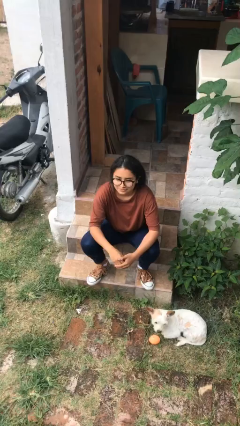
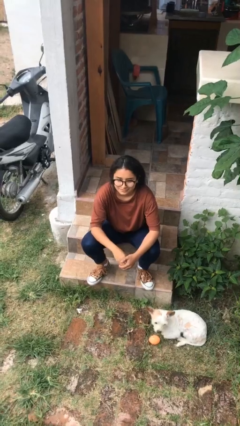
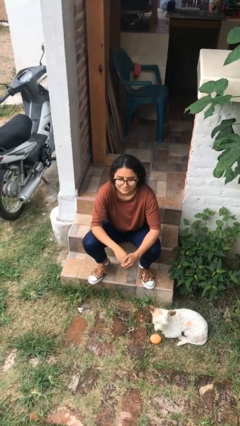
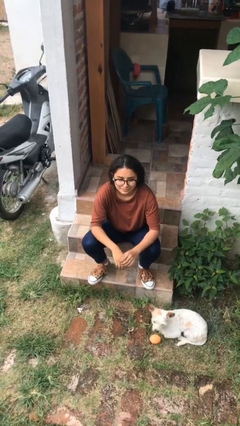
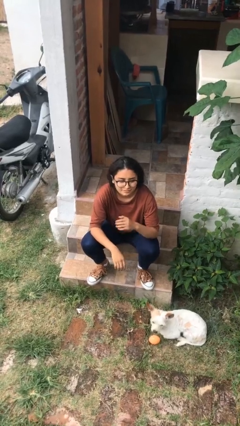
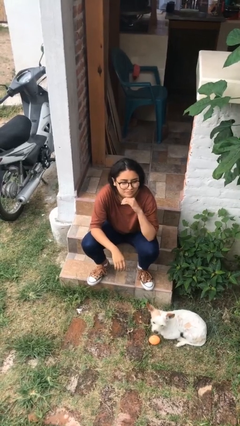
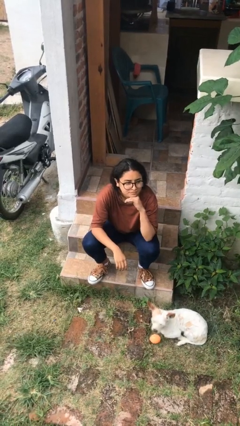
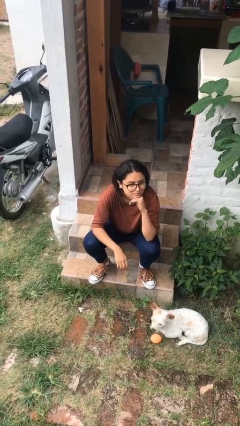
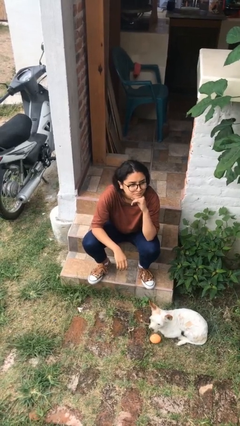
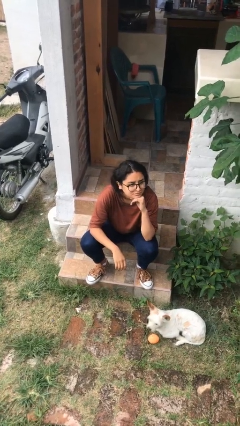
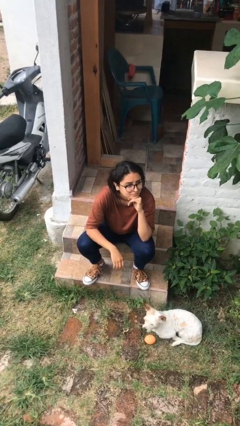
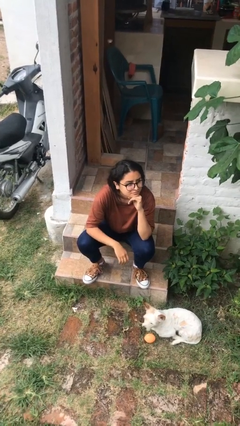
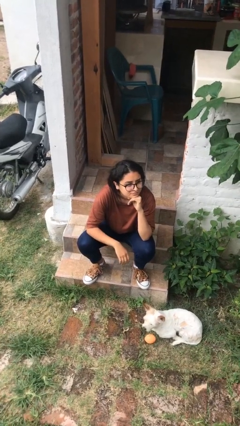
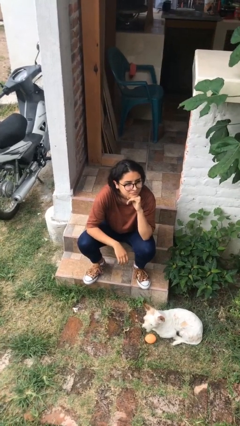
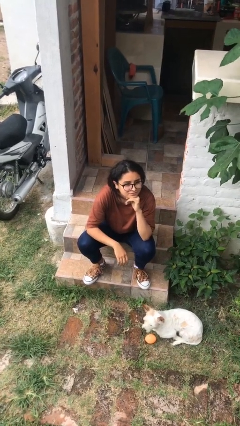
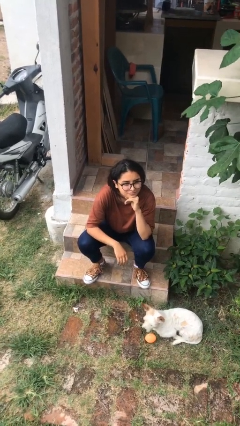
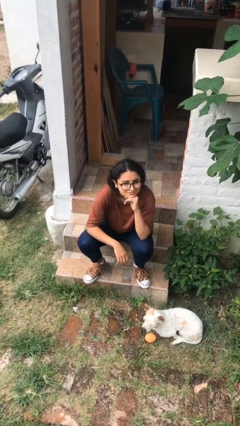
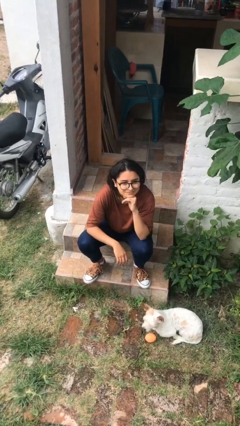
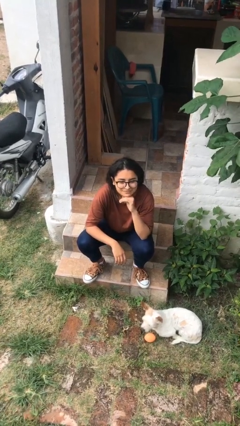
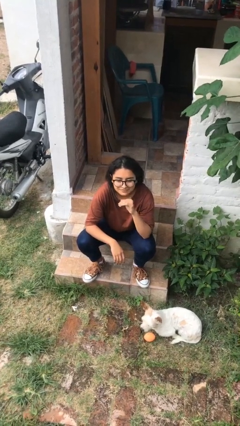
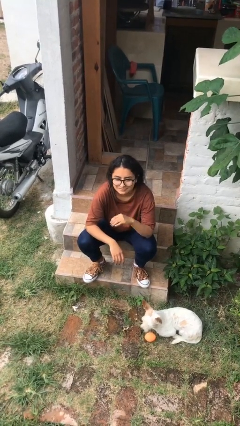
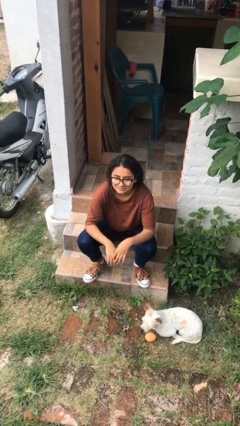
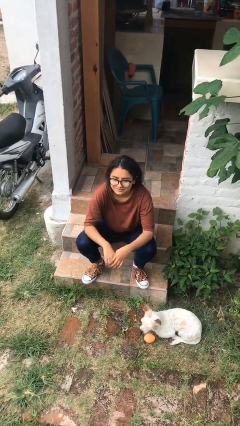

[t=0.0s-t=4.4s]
person strokes chin

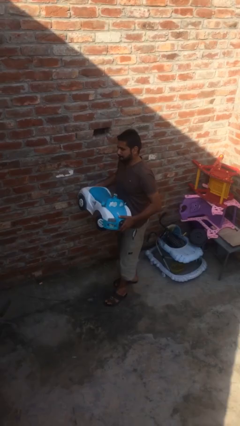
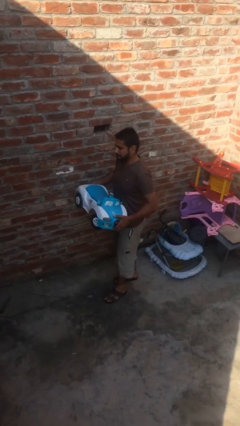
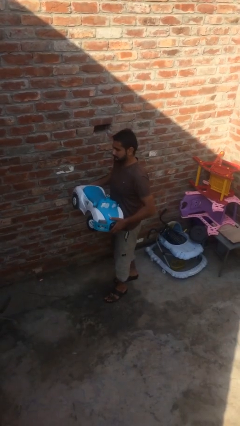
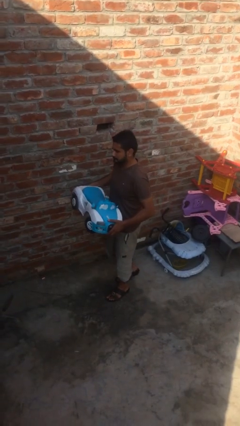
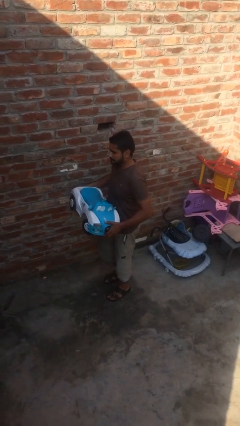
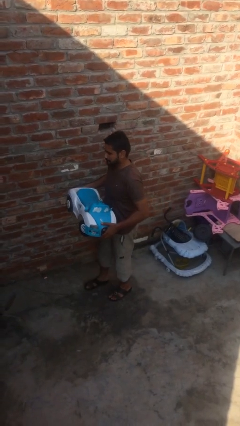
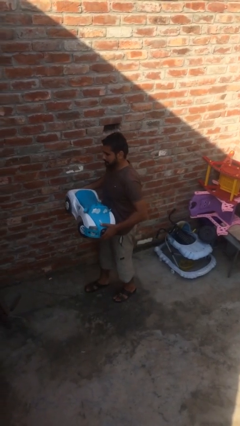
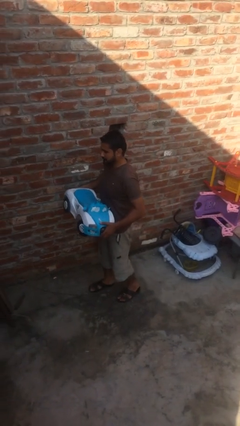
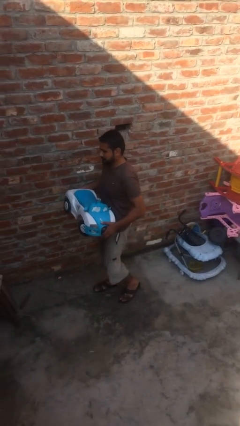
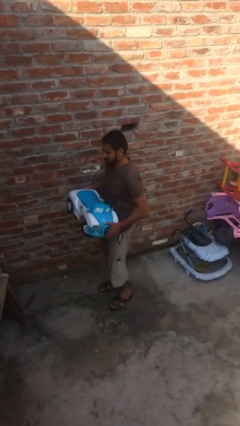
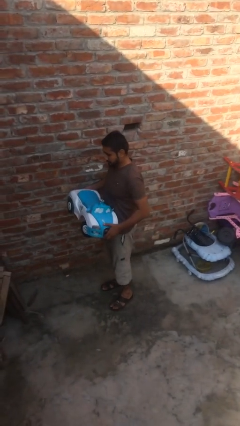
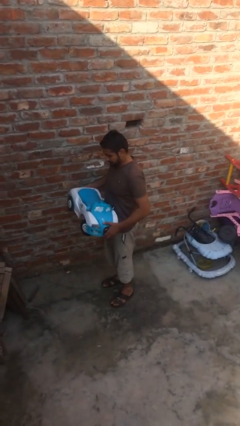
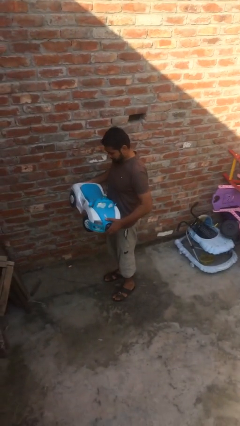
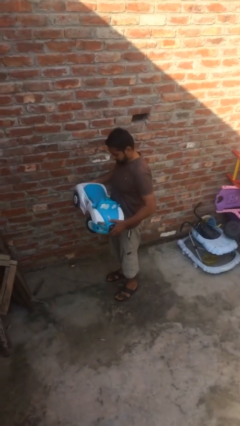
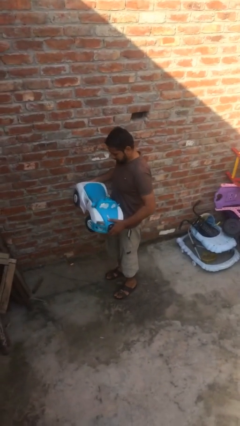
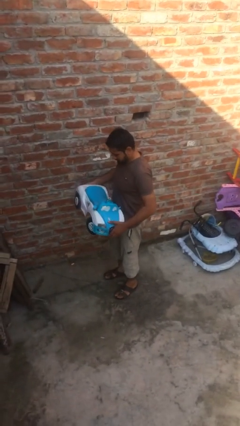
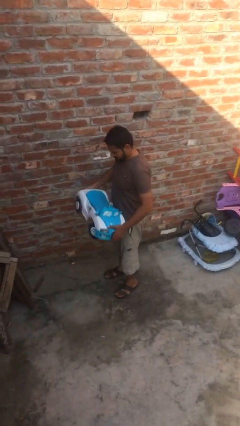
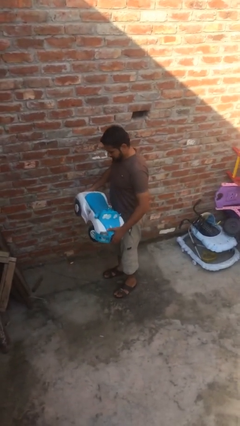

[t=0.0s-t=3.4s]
person puts down object on floor

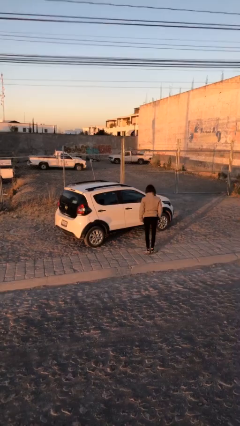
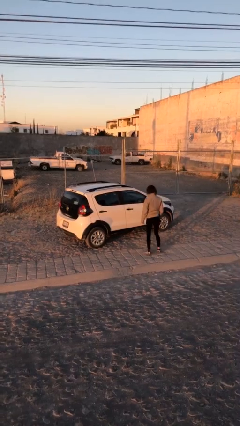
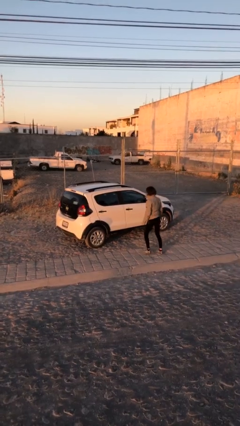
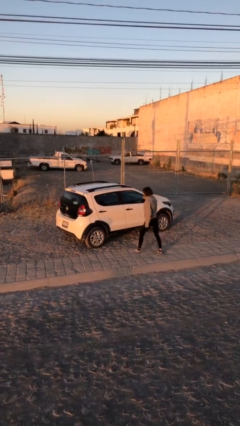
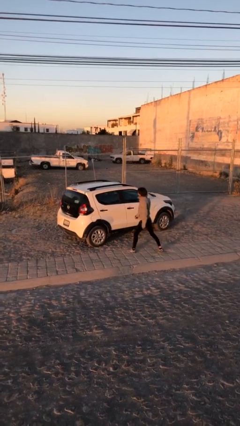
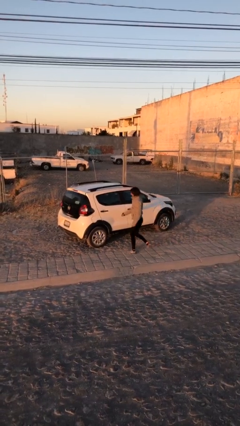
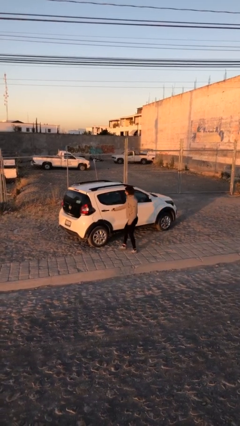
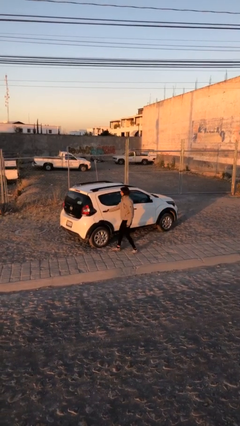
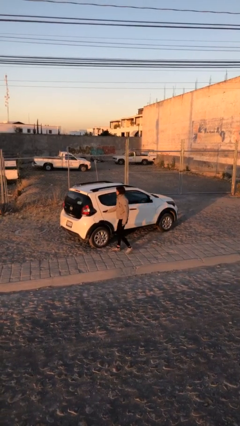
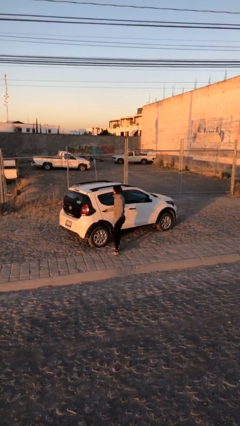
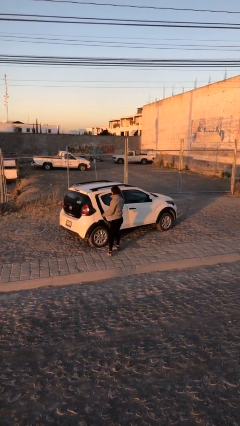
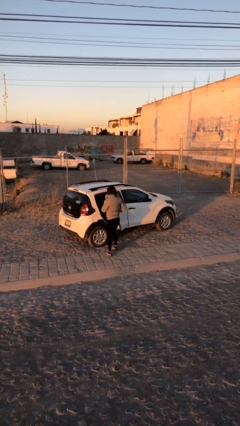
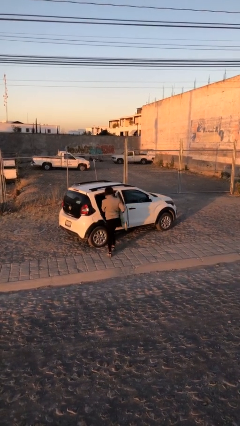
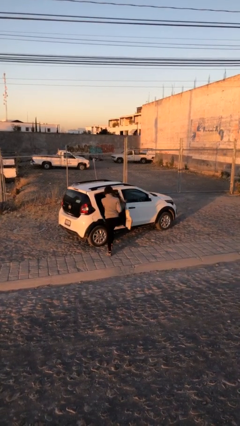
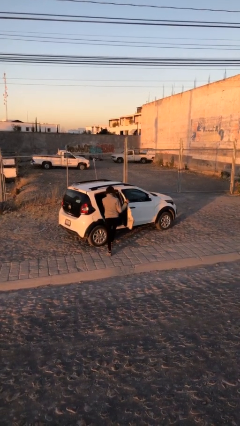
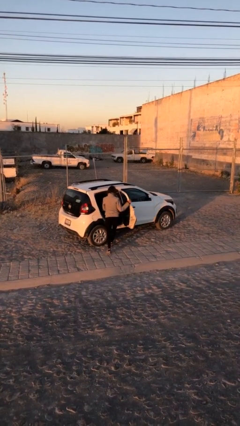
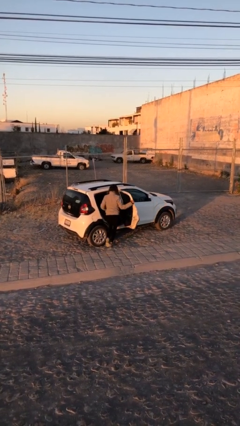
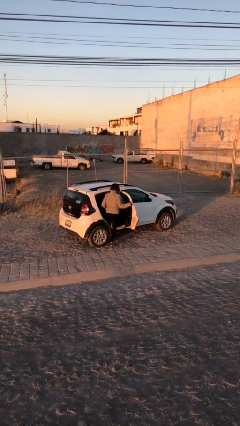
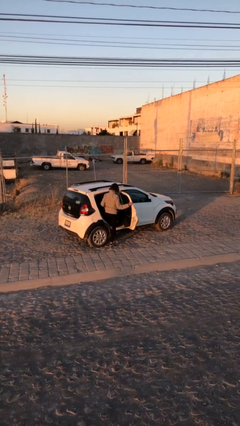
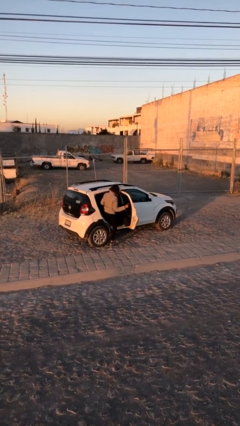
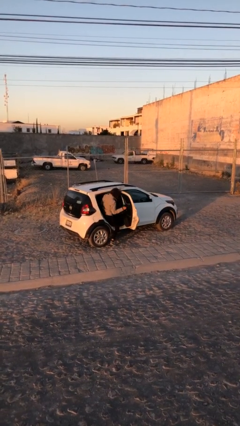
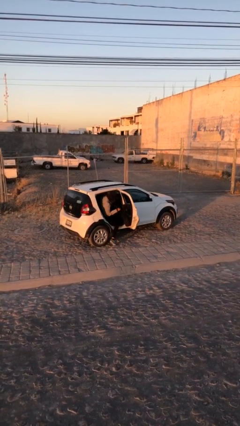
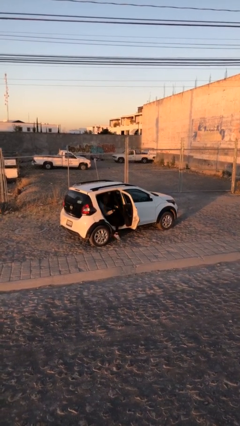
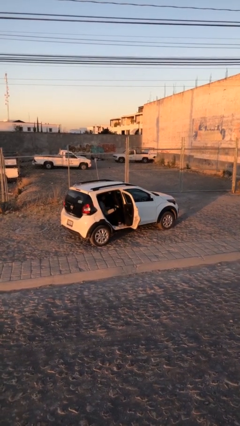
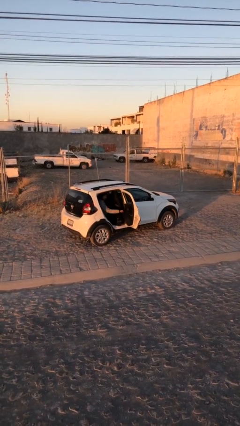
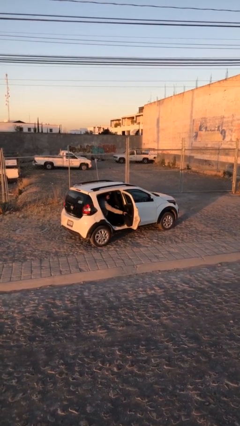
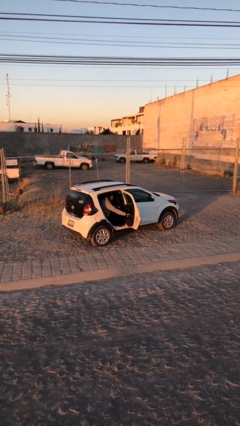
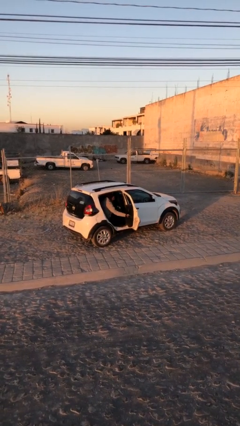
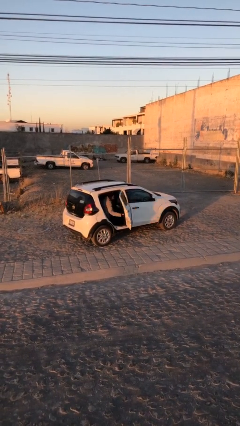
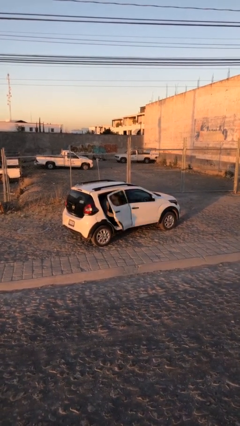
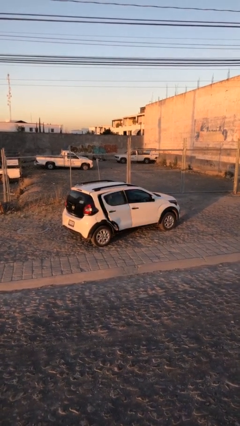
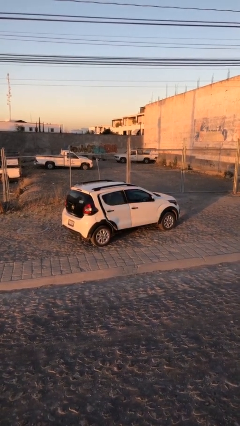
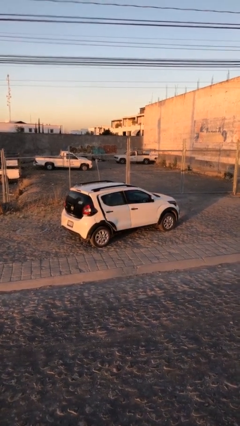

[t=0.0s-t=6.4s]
car picks up person

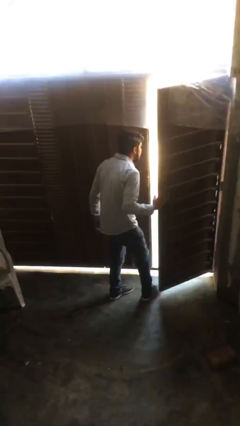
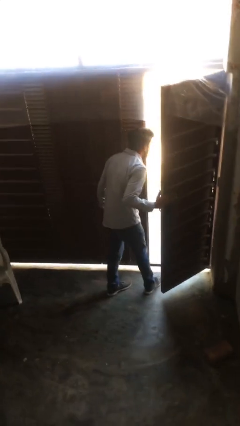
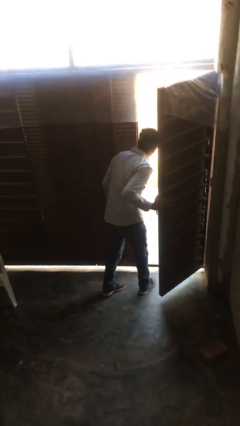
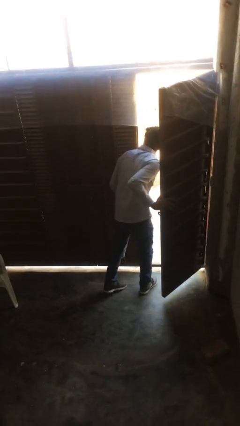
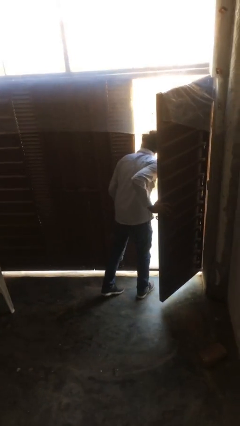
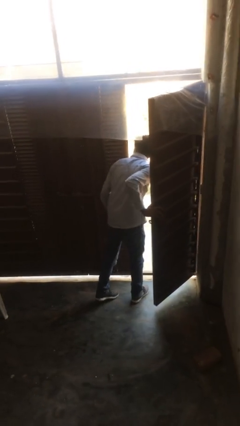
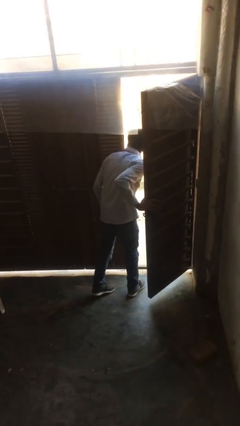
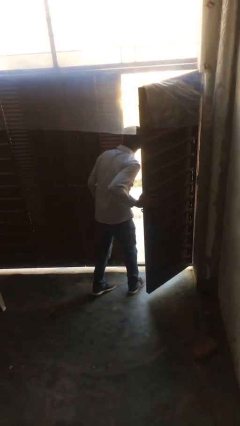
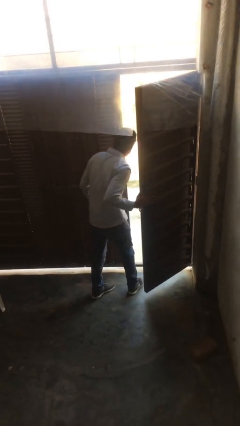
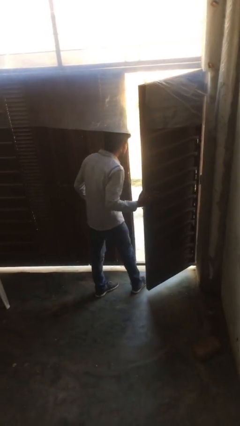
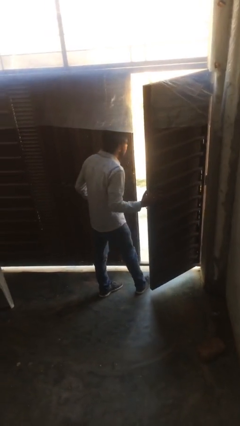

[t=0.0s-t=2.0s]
person opens facility door

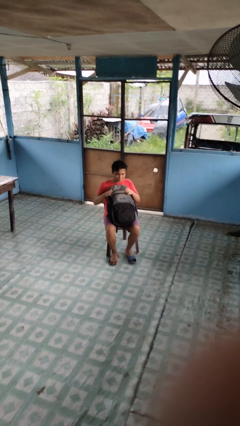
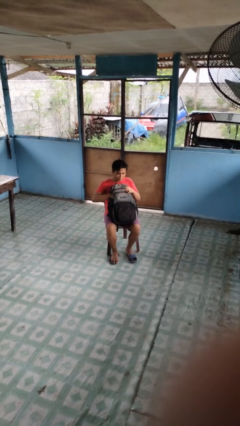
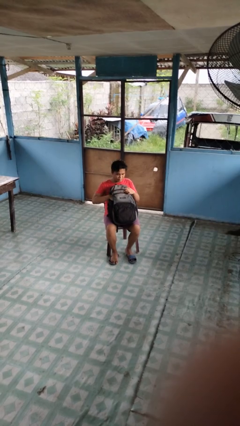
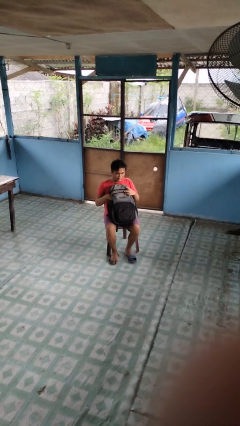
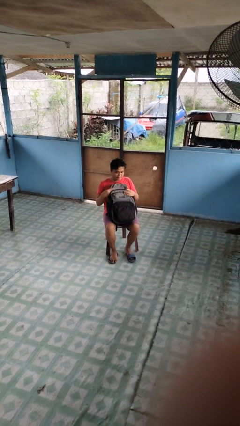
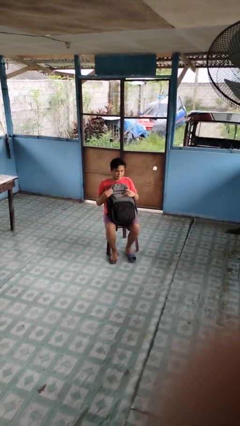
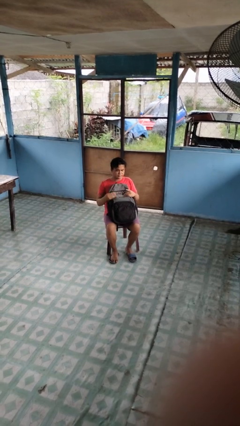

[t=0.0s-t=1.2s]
person puts object into backpack

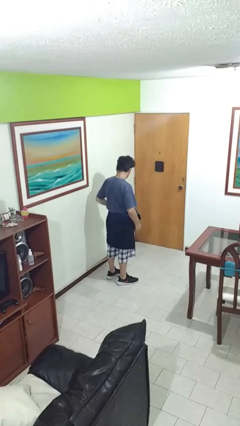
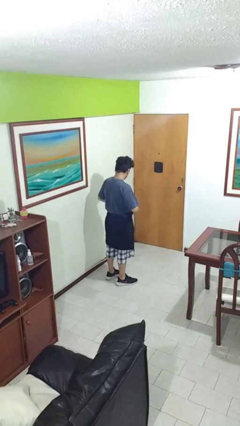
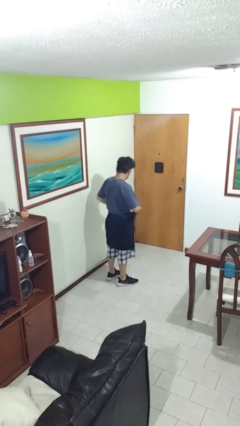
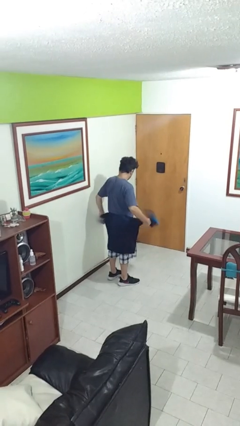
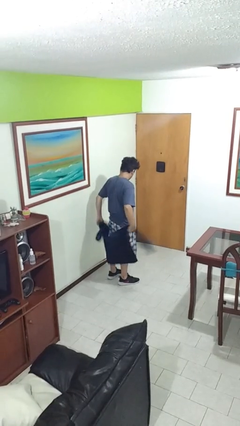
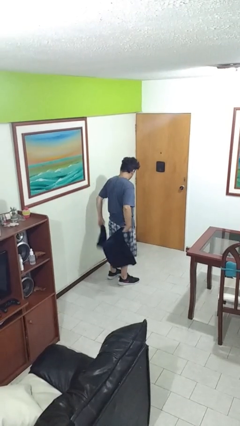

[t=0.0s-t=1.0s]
person unties jacket around waist
